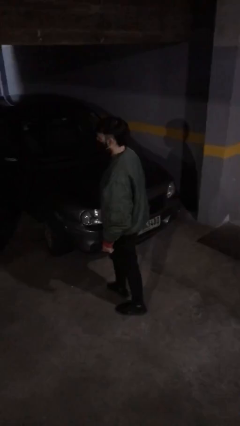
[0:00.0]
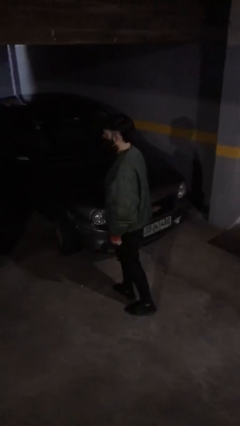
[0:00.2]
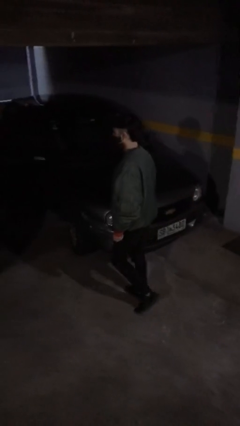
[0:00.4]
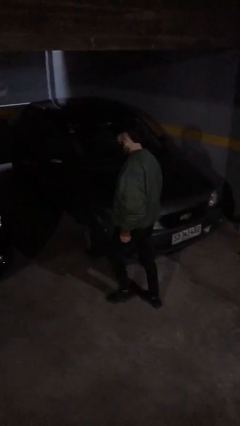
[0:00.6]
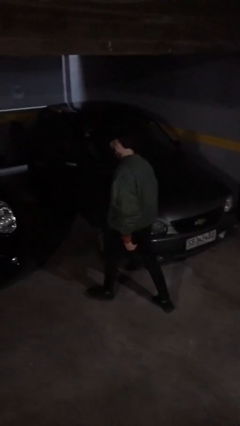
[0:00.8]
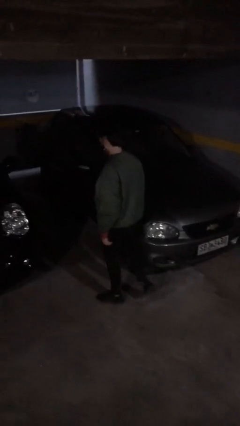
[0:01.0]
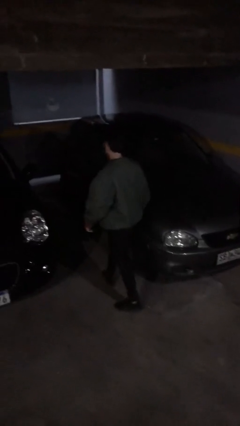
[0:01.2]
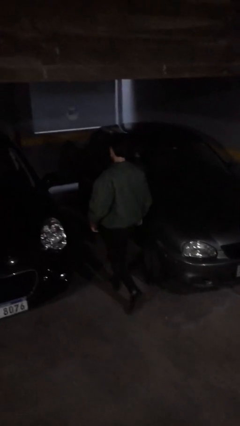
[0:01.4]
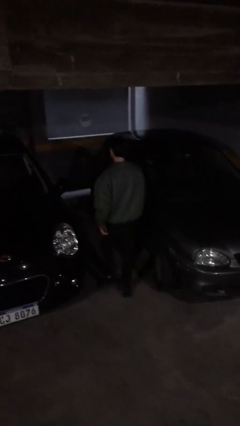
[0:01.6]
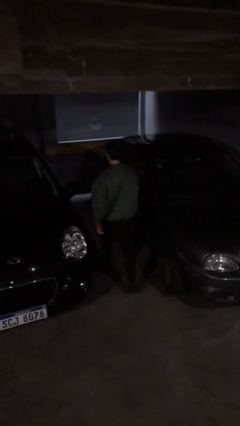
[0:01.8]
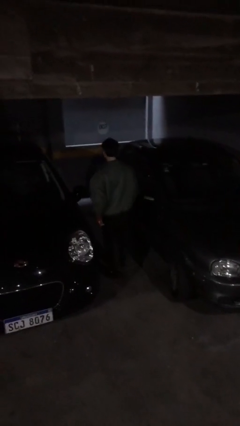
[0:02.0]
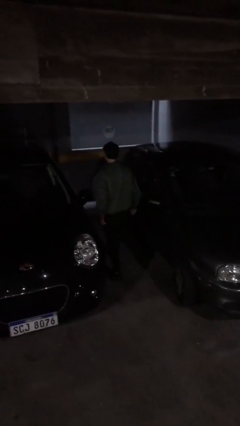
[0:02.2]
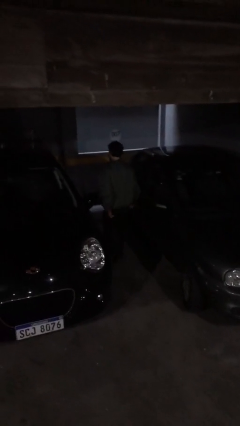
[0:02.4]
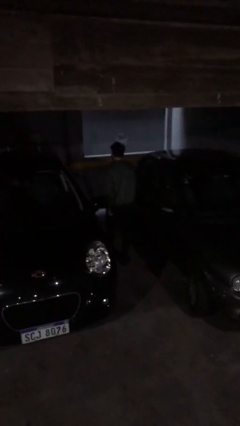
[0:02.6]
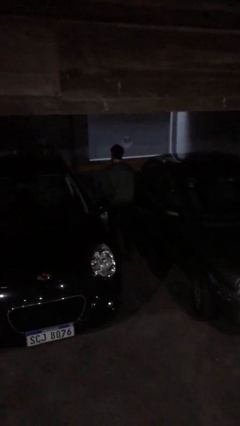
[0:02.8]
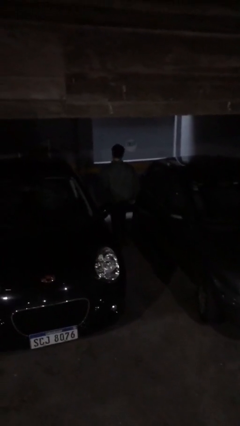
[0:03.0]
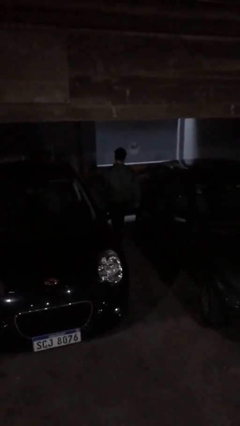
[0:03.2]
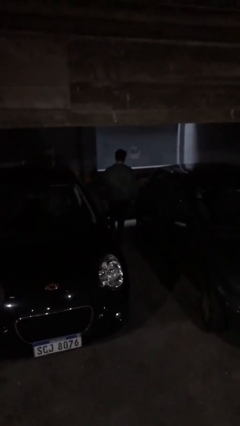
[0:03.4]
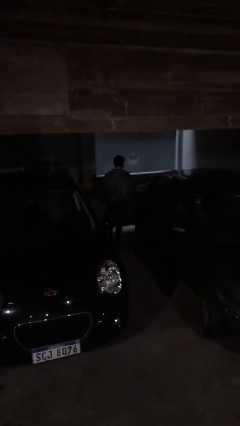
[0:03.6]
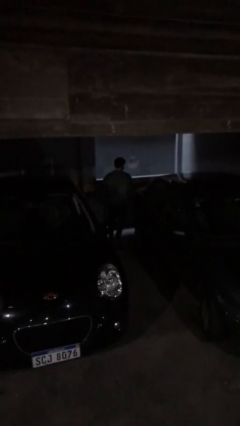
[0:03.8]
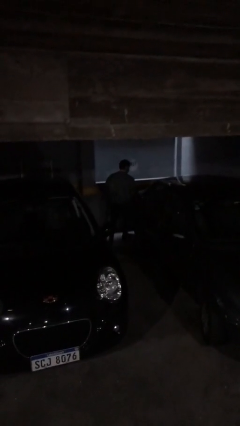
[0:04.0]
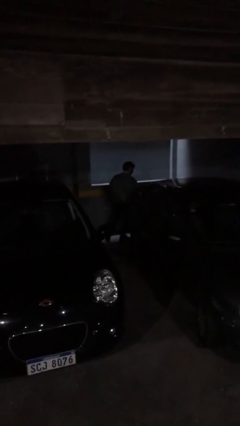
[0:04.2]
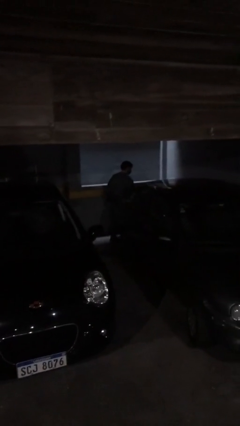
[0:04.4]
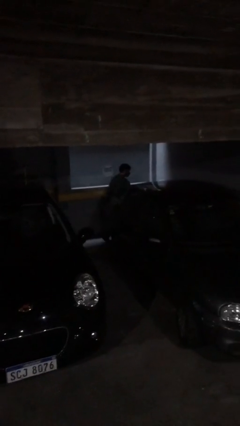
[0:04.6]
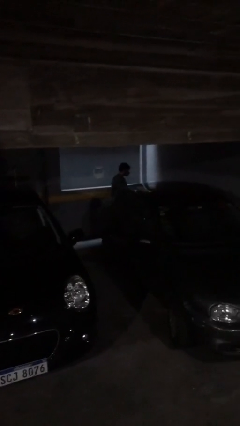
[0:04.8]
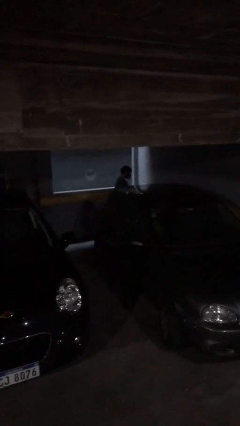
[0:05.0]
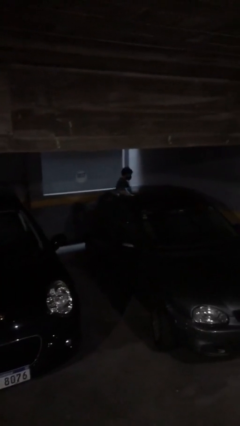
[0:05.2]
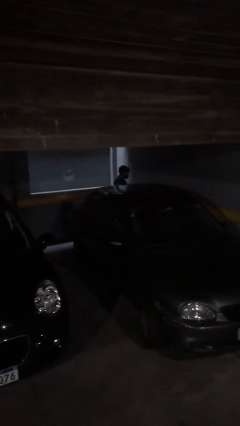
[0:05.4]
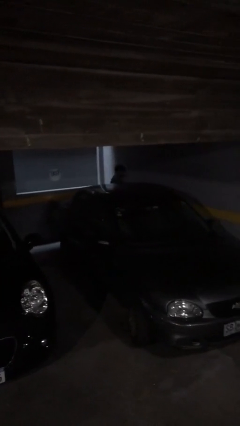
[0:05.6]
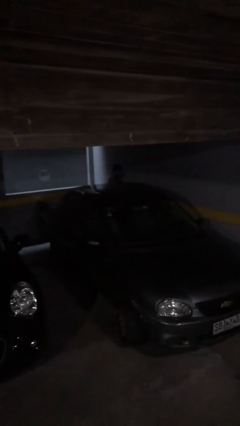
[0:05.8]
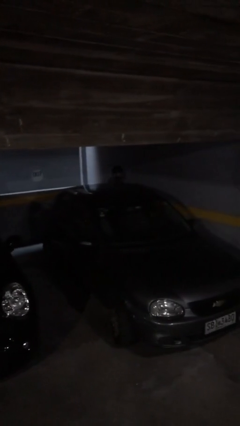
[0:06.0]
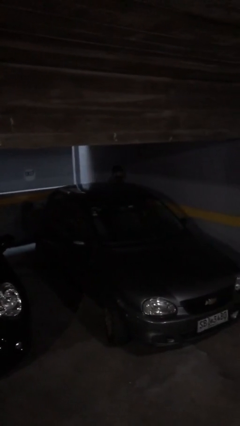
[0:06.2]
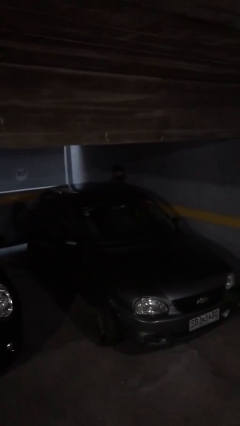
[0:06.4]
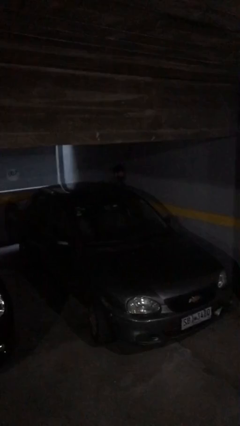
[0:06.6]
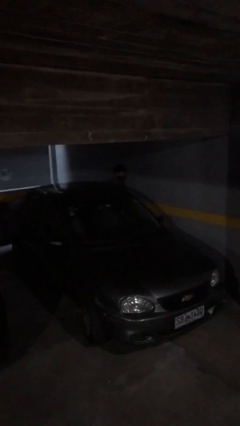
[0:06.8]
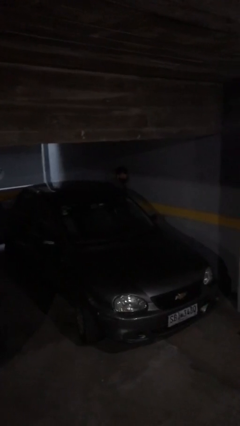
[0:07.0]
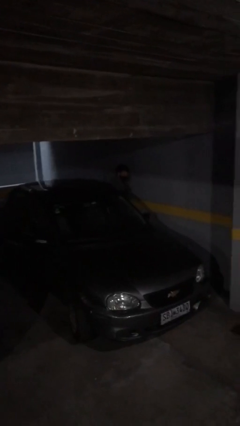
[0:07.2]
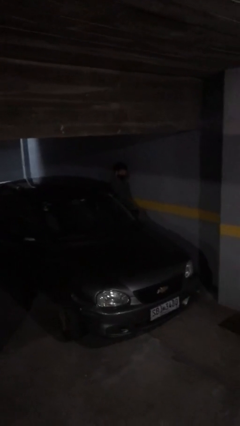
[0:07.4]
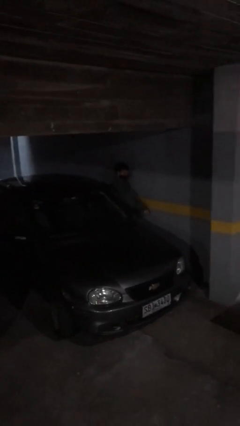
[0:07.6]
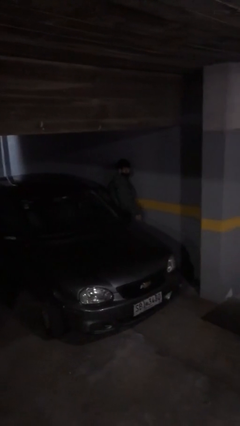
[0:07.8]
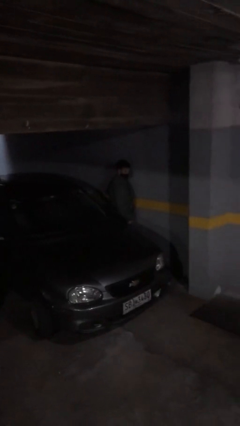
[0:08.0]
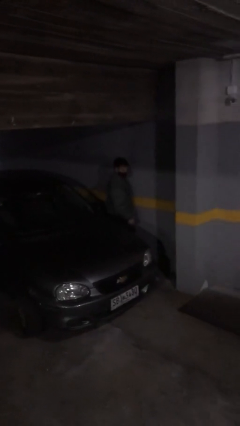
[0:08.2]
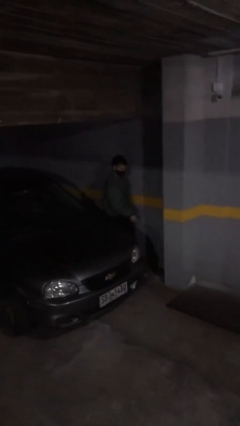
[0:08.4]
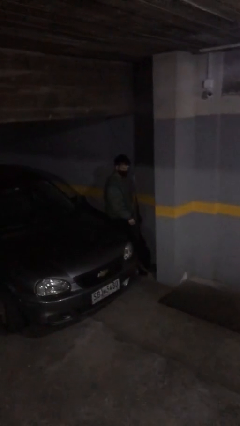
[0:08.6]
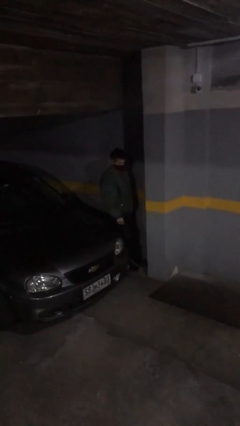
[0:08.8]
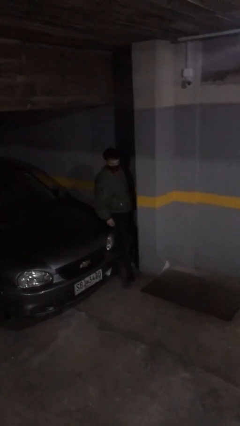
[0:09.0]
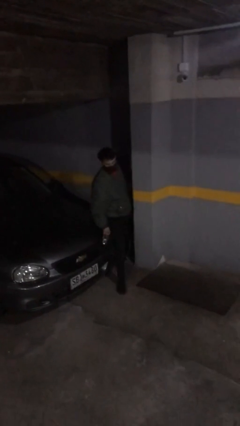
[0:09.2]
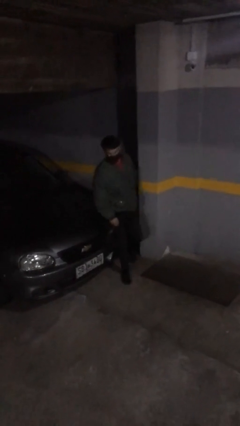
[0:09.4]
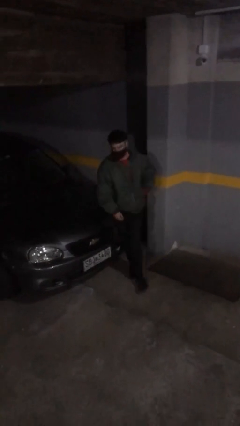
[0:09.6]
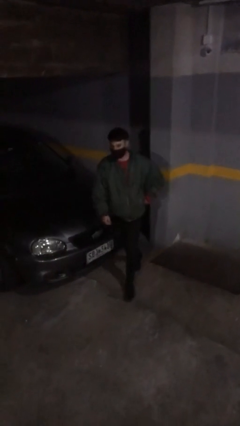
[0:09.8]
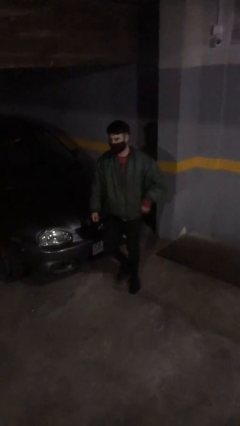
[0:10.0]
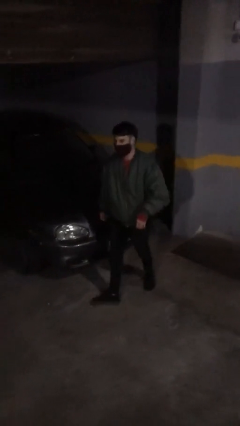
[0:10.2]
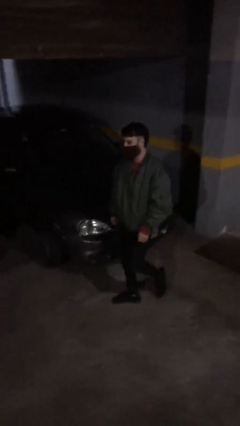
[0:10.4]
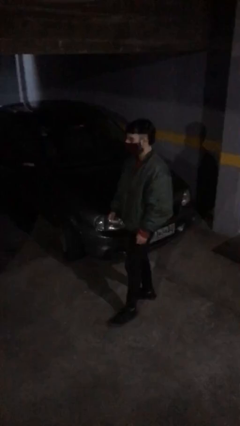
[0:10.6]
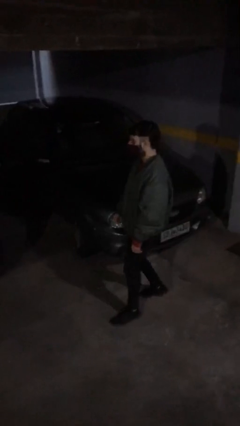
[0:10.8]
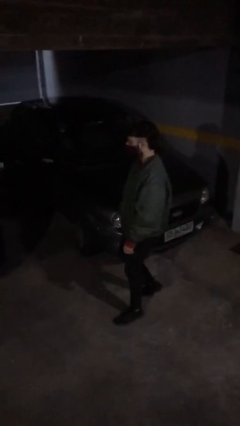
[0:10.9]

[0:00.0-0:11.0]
person walks around car

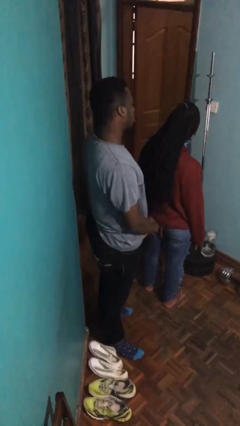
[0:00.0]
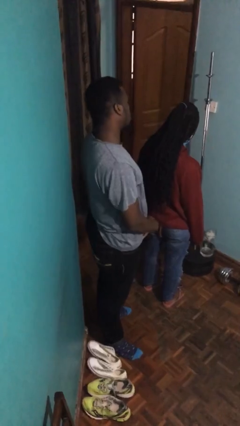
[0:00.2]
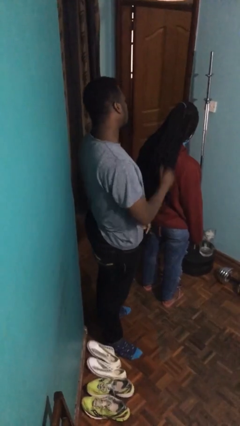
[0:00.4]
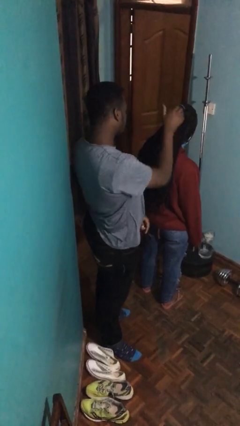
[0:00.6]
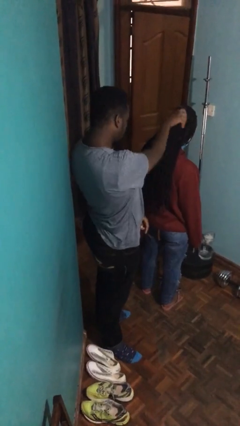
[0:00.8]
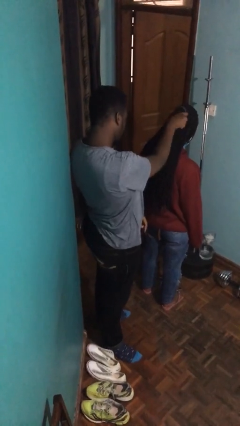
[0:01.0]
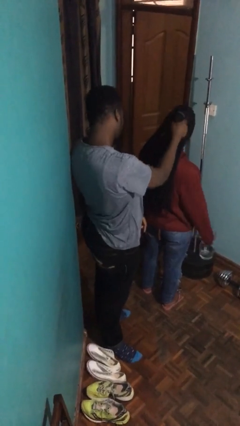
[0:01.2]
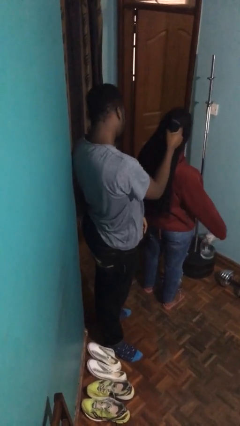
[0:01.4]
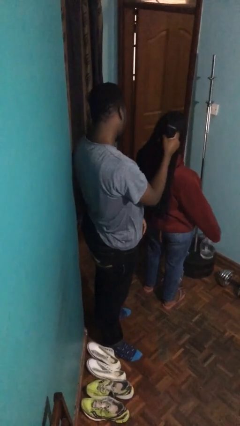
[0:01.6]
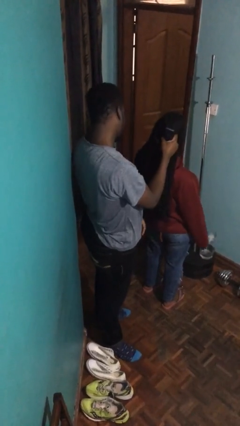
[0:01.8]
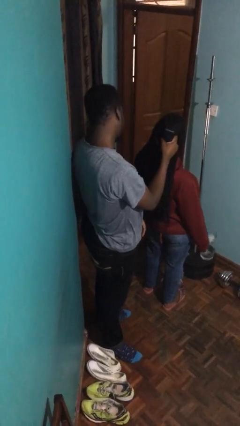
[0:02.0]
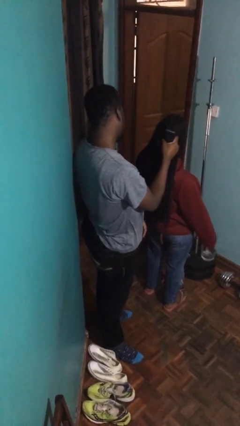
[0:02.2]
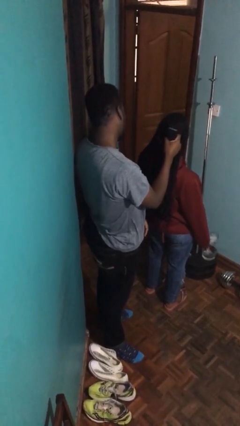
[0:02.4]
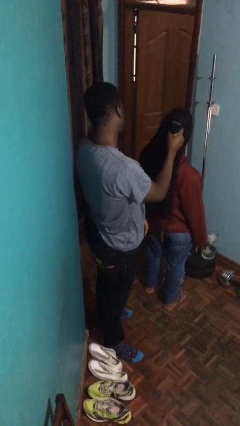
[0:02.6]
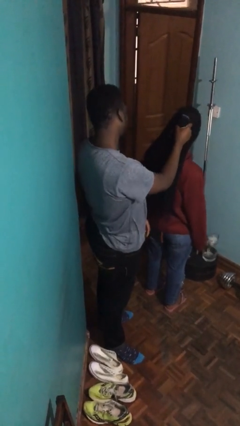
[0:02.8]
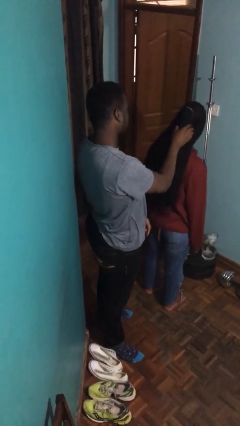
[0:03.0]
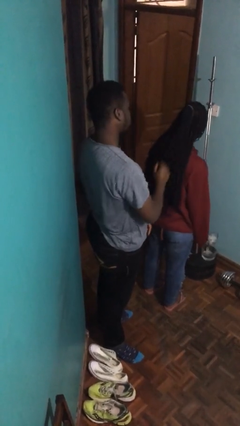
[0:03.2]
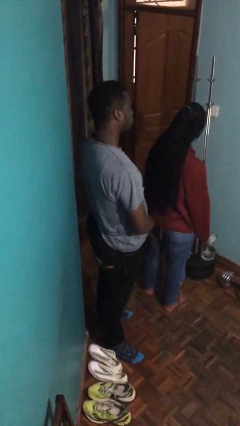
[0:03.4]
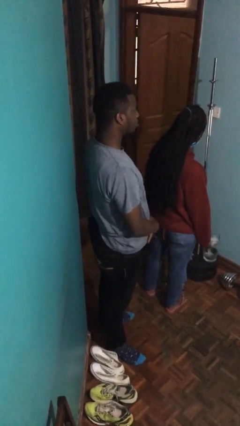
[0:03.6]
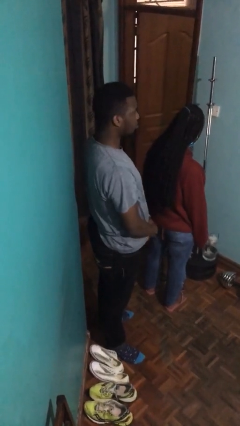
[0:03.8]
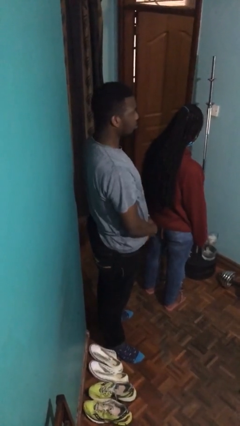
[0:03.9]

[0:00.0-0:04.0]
person grabs person by hair

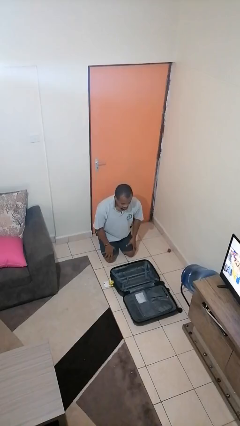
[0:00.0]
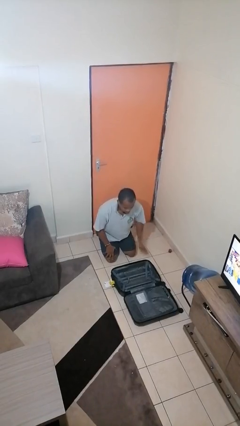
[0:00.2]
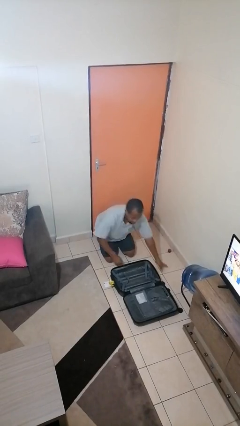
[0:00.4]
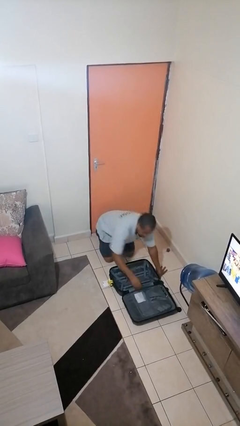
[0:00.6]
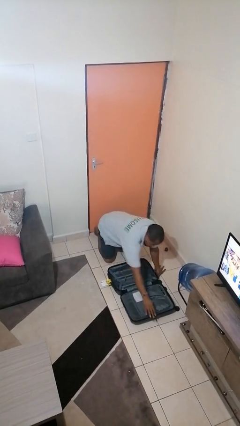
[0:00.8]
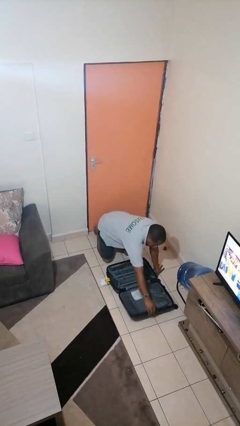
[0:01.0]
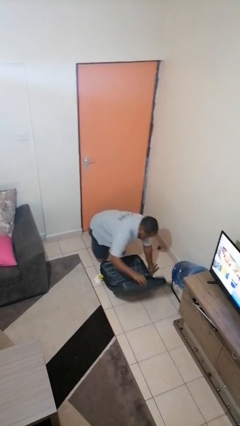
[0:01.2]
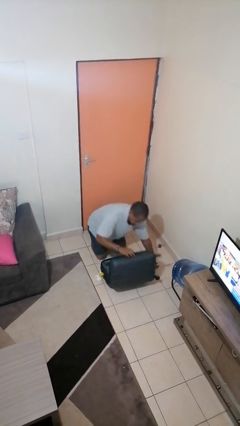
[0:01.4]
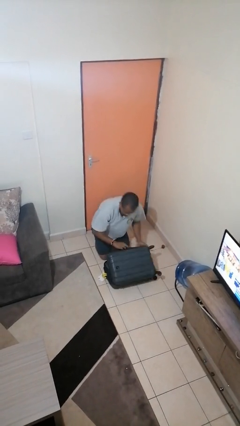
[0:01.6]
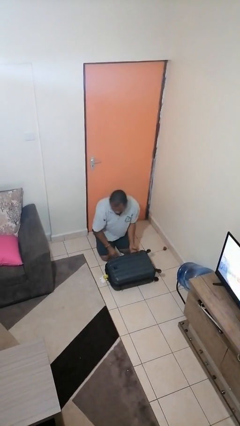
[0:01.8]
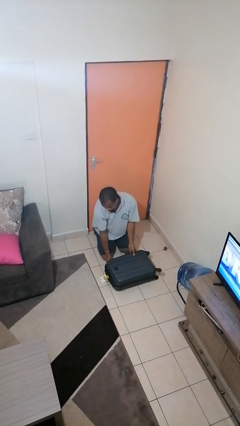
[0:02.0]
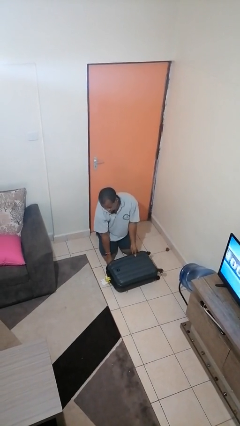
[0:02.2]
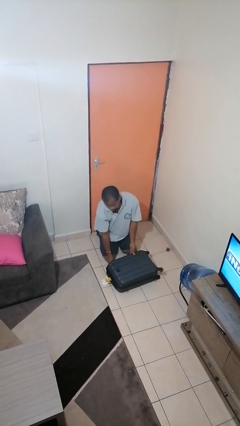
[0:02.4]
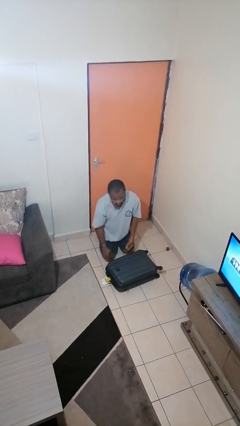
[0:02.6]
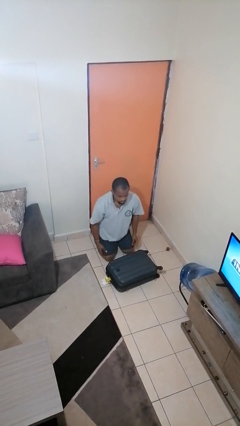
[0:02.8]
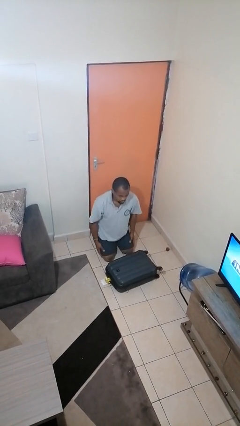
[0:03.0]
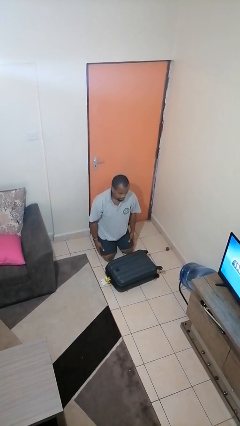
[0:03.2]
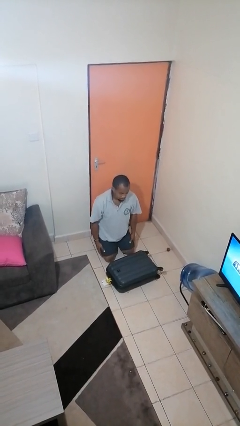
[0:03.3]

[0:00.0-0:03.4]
person closes suitcase
